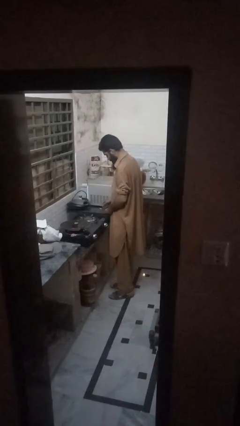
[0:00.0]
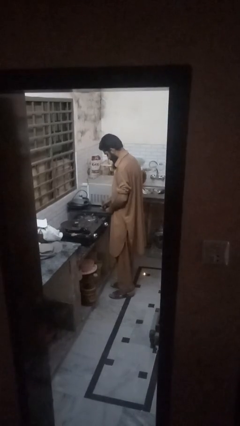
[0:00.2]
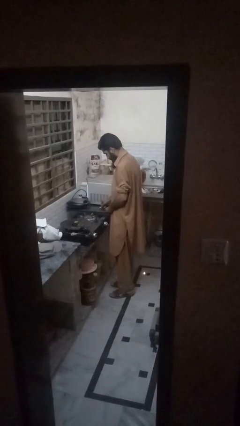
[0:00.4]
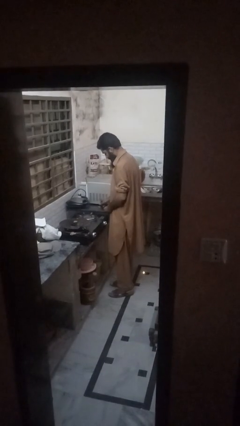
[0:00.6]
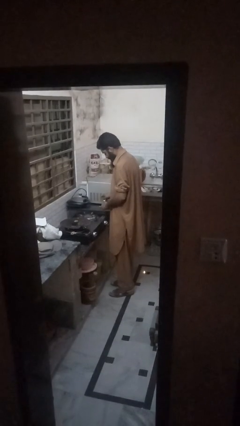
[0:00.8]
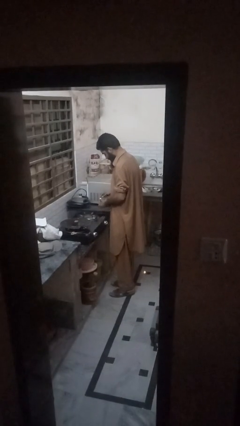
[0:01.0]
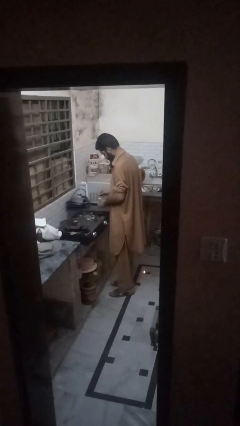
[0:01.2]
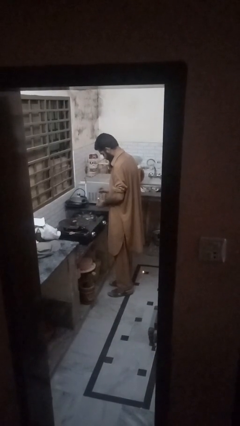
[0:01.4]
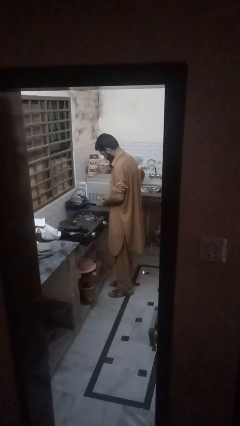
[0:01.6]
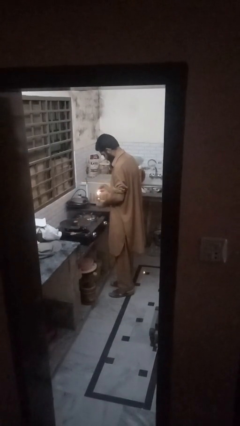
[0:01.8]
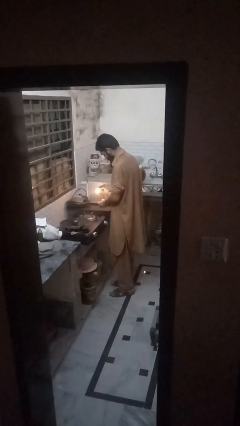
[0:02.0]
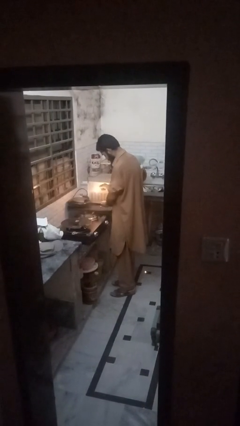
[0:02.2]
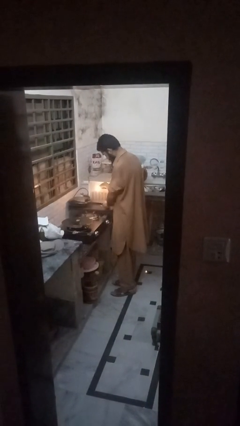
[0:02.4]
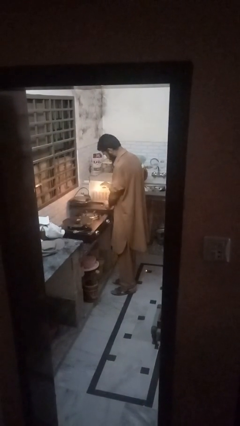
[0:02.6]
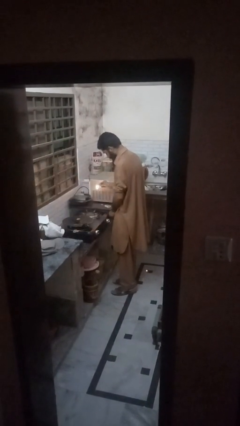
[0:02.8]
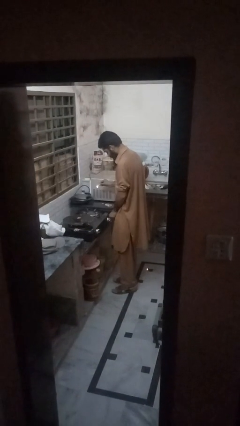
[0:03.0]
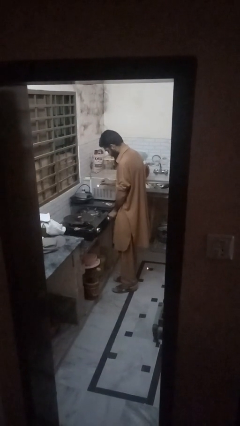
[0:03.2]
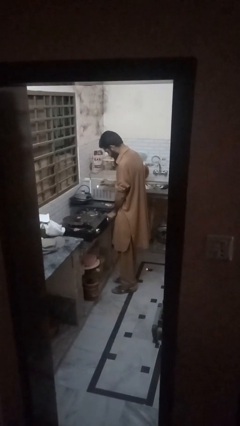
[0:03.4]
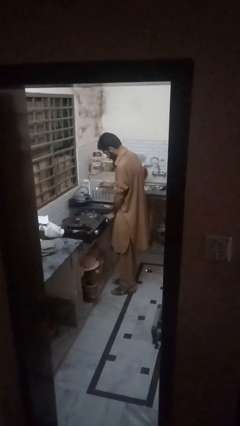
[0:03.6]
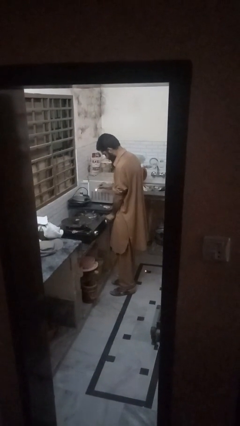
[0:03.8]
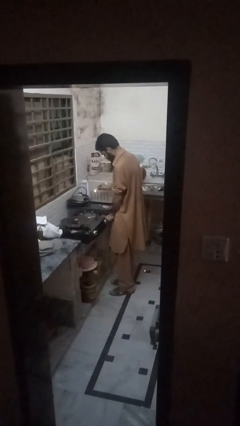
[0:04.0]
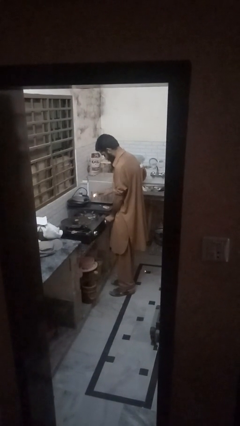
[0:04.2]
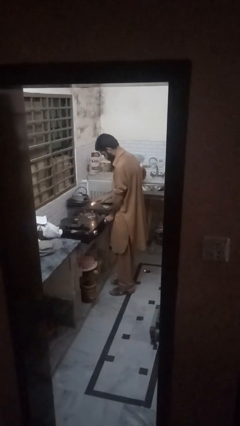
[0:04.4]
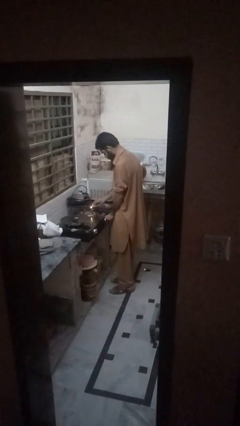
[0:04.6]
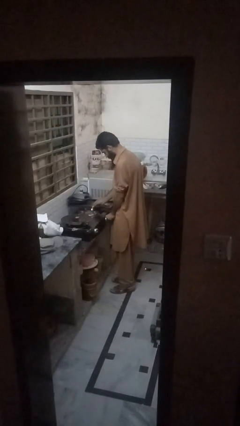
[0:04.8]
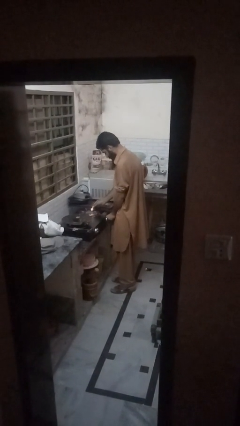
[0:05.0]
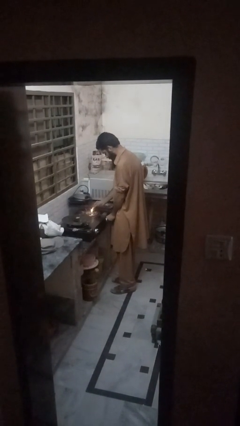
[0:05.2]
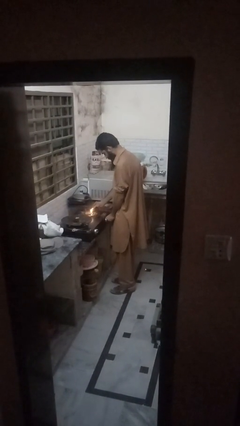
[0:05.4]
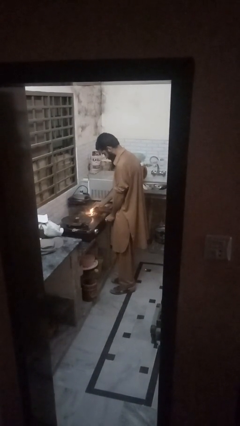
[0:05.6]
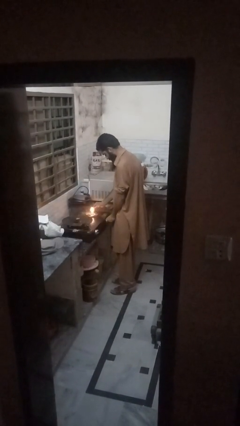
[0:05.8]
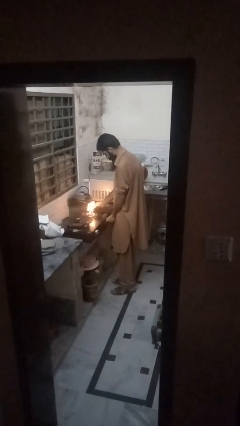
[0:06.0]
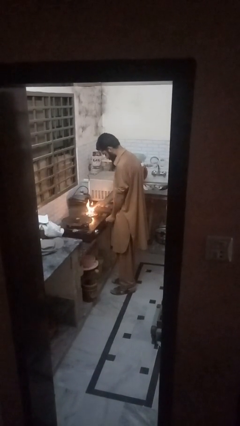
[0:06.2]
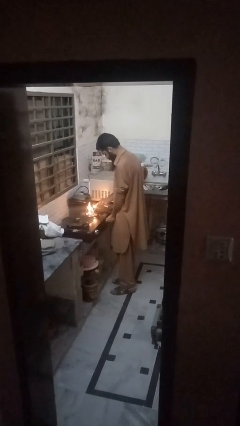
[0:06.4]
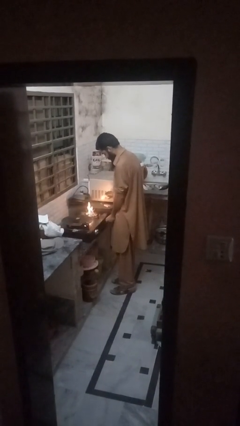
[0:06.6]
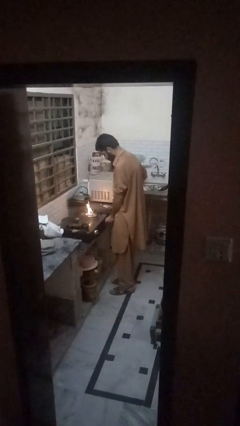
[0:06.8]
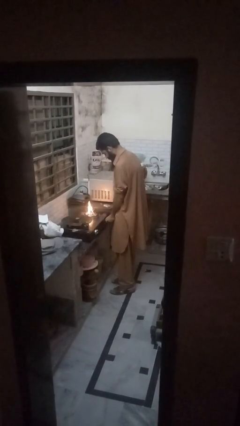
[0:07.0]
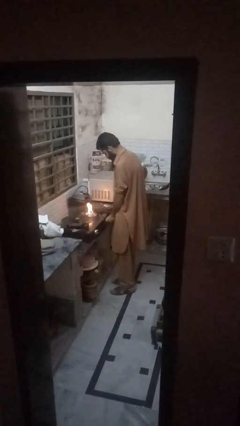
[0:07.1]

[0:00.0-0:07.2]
person turns on stovetop

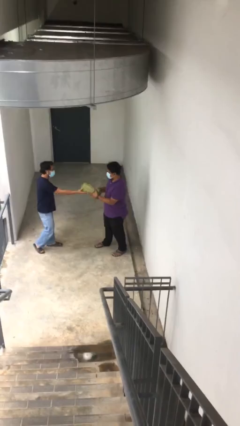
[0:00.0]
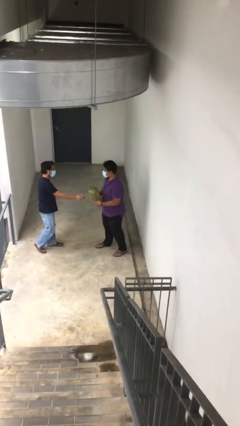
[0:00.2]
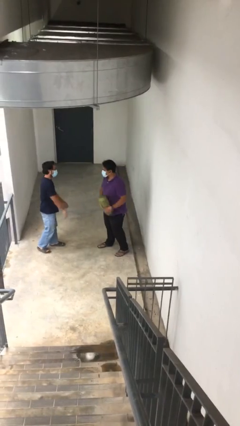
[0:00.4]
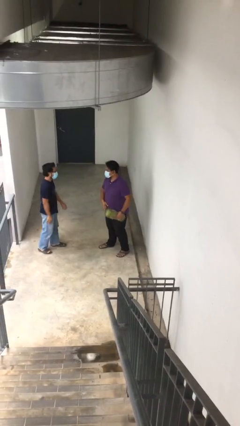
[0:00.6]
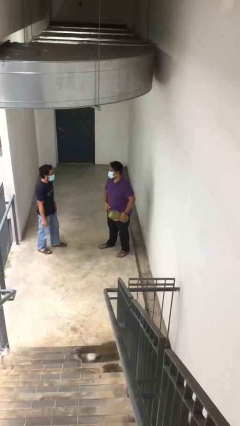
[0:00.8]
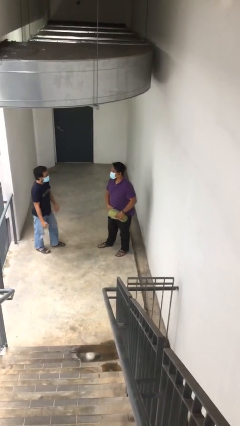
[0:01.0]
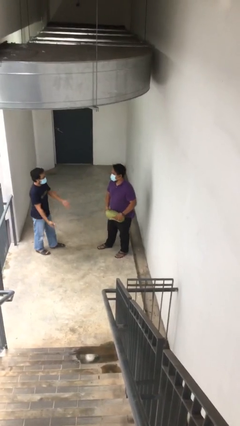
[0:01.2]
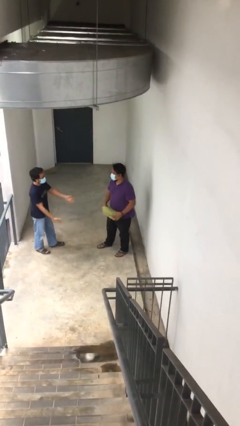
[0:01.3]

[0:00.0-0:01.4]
person transfers object to person

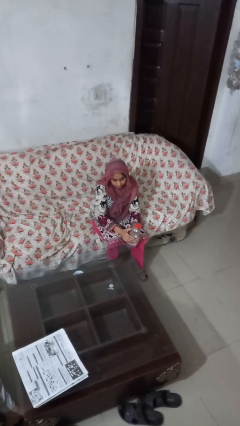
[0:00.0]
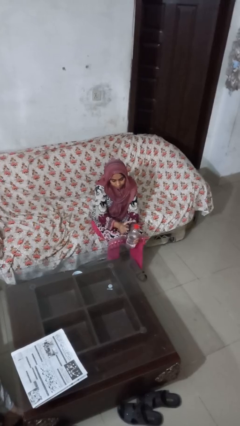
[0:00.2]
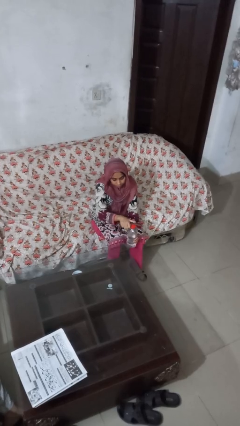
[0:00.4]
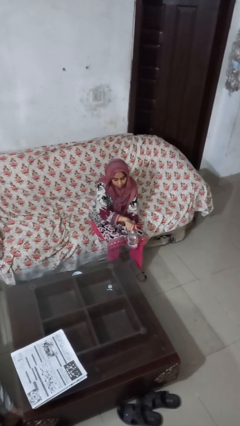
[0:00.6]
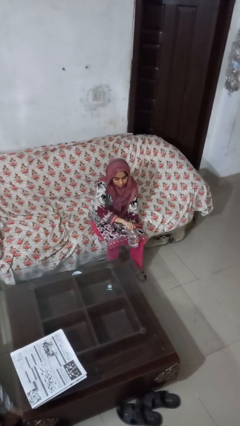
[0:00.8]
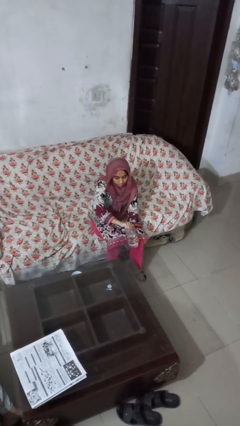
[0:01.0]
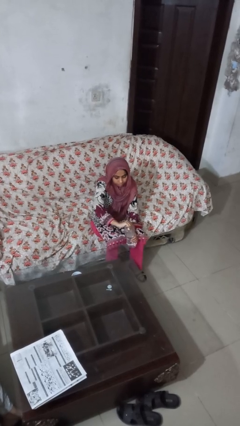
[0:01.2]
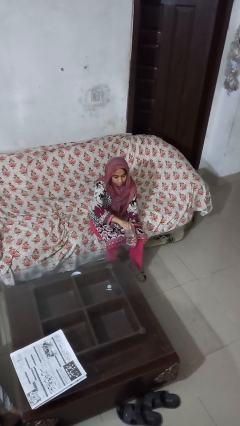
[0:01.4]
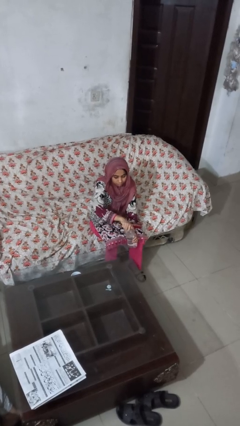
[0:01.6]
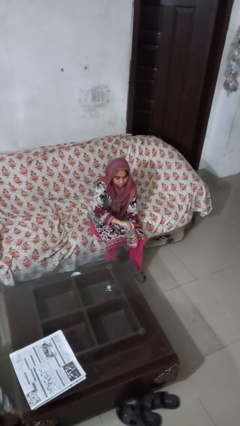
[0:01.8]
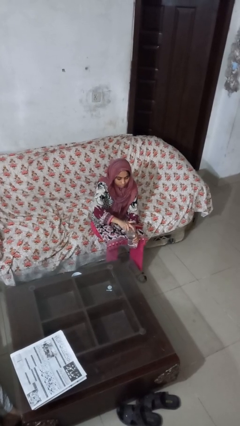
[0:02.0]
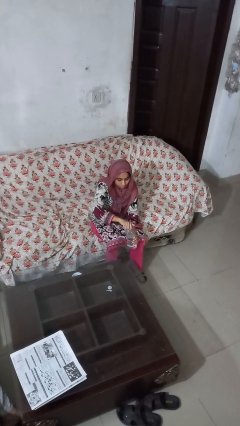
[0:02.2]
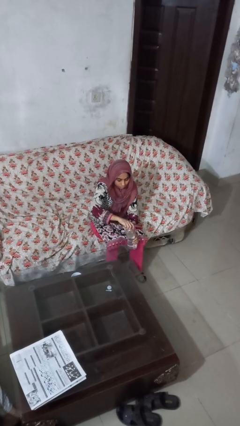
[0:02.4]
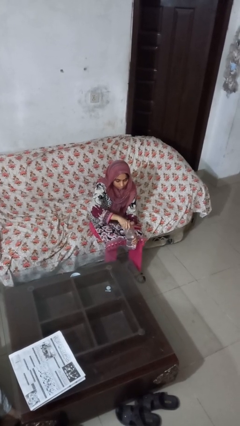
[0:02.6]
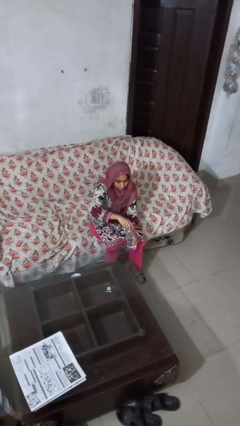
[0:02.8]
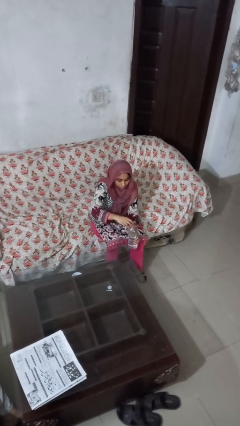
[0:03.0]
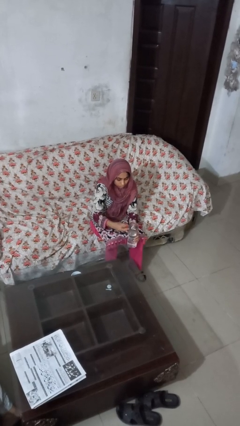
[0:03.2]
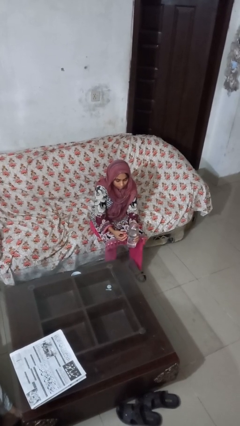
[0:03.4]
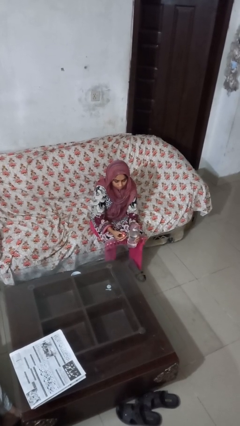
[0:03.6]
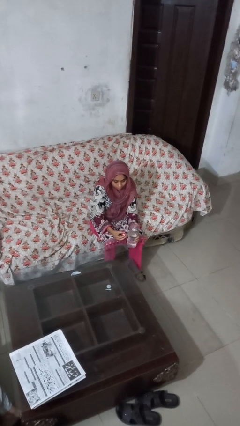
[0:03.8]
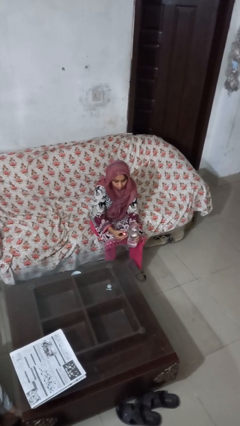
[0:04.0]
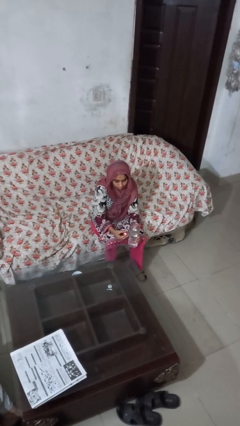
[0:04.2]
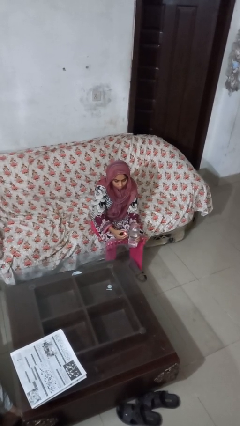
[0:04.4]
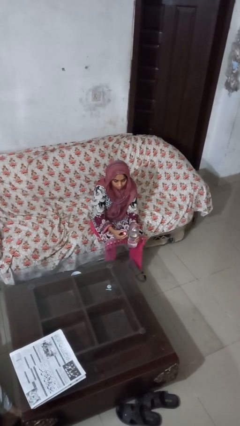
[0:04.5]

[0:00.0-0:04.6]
person unscrews lid from bottle

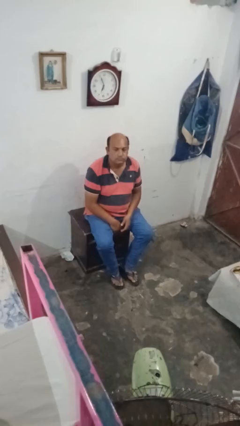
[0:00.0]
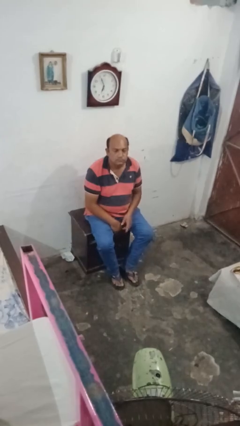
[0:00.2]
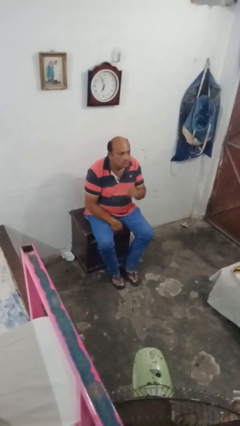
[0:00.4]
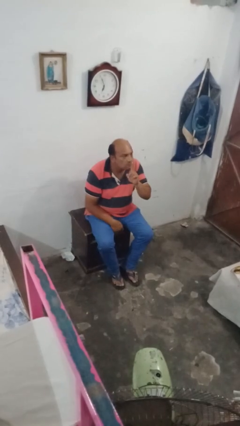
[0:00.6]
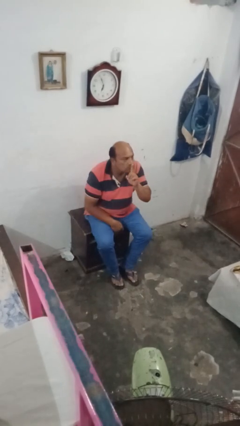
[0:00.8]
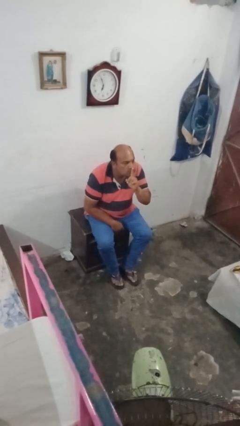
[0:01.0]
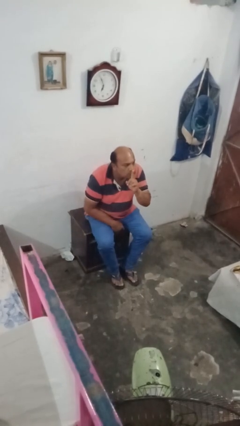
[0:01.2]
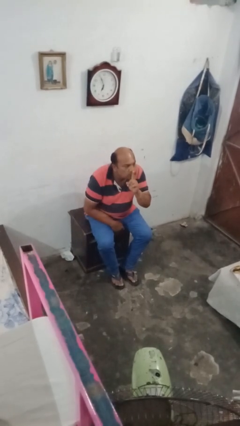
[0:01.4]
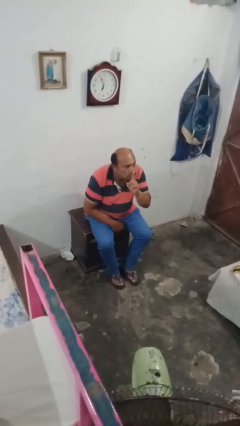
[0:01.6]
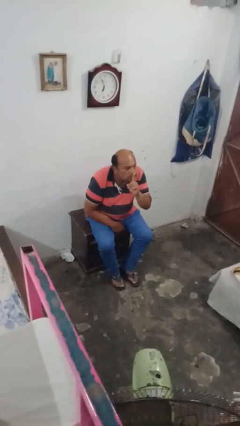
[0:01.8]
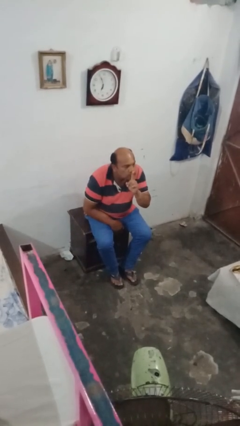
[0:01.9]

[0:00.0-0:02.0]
person gestures blow kiss

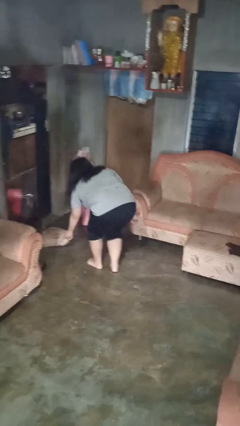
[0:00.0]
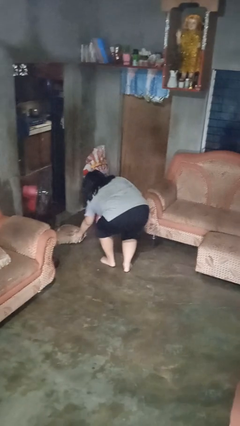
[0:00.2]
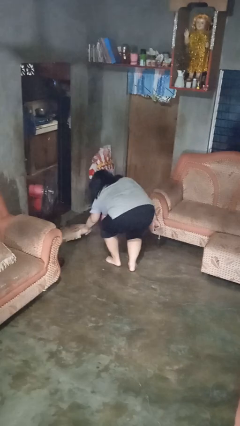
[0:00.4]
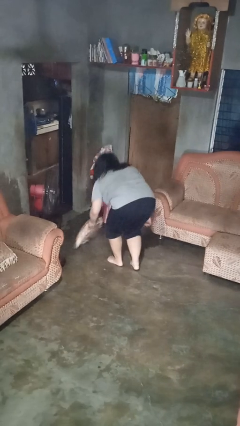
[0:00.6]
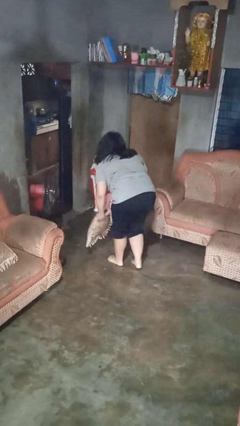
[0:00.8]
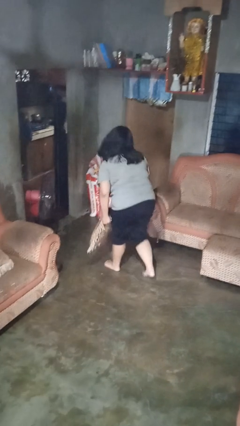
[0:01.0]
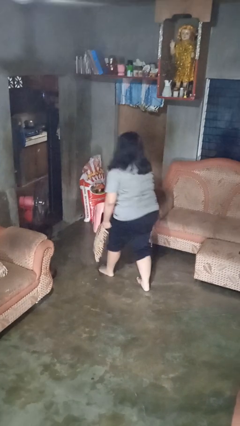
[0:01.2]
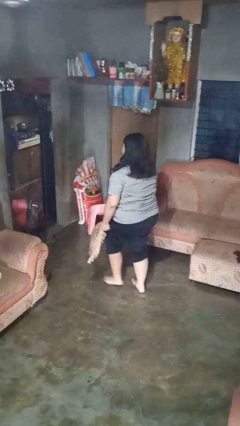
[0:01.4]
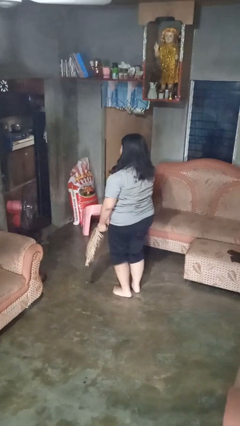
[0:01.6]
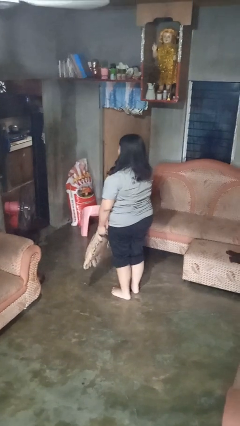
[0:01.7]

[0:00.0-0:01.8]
person picks up object from floor

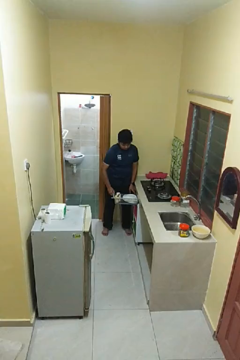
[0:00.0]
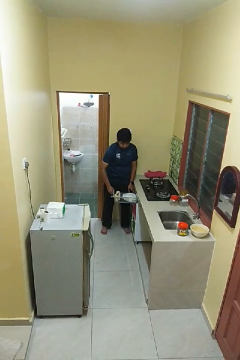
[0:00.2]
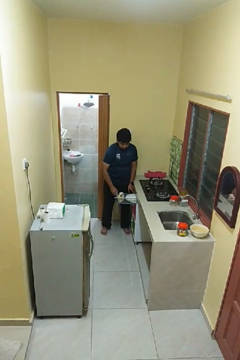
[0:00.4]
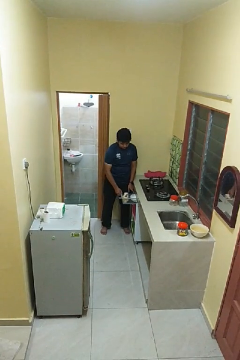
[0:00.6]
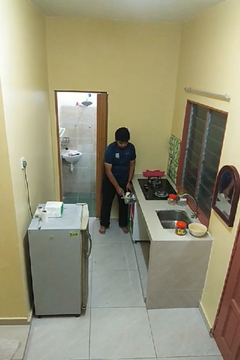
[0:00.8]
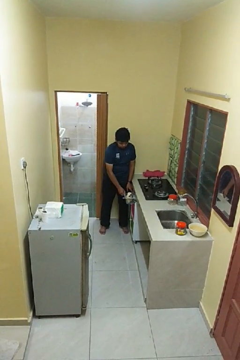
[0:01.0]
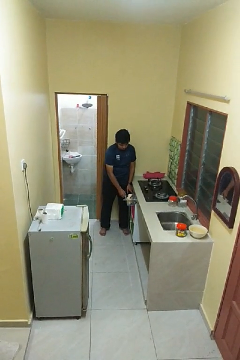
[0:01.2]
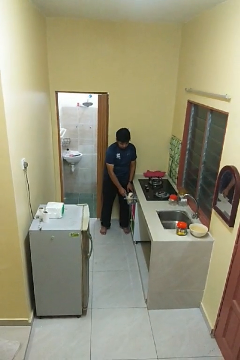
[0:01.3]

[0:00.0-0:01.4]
person closes kitchen drawer
